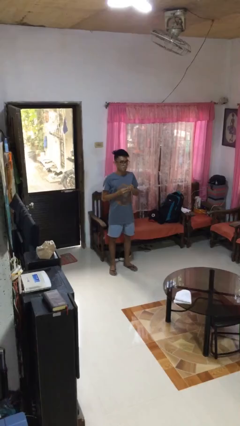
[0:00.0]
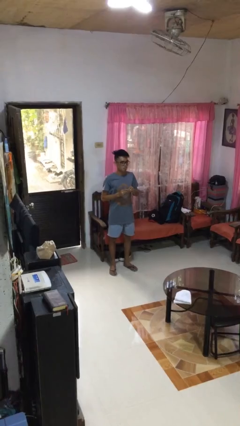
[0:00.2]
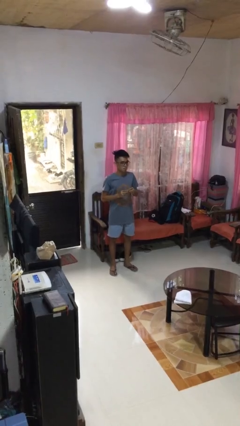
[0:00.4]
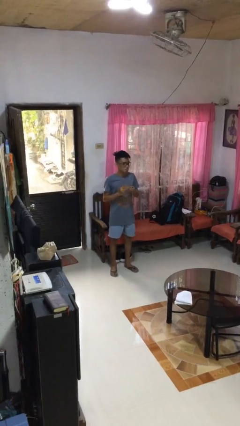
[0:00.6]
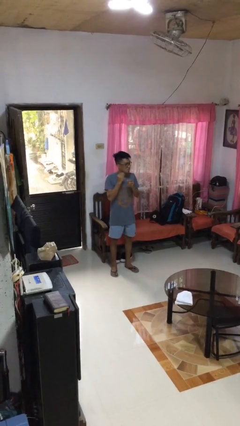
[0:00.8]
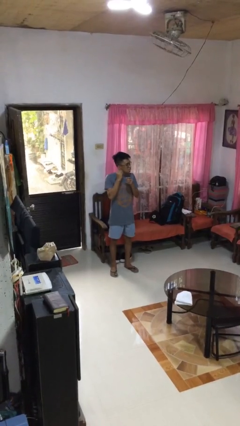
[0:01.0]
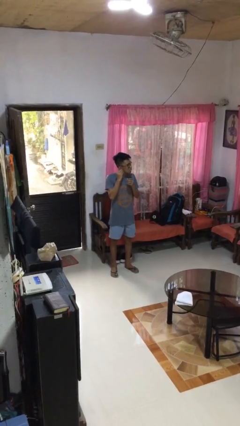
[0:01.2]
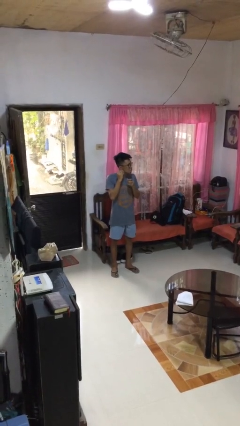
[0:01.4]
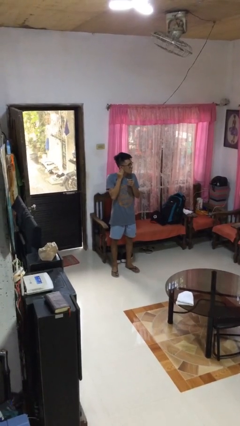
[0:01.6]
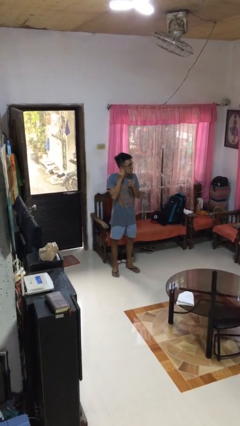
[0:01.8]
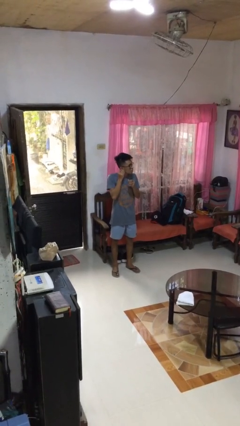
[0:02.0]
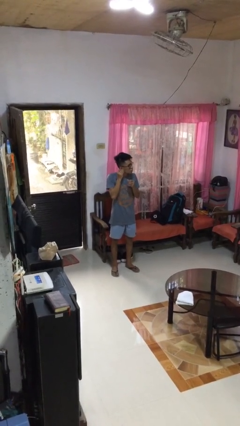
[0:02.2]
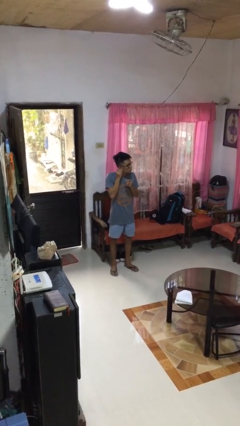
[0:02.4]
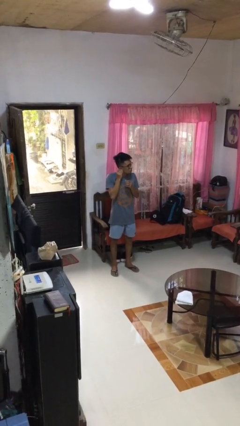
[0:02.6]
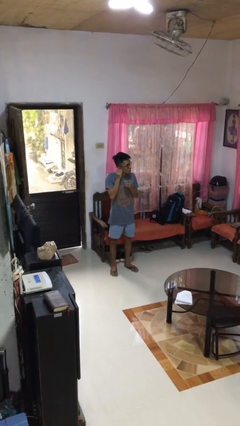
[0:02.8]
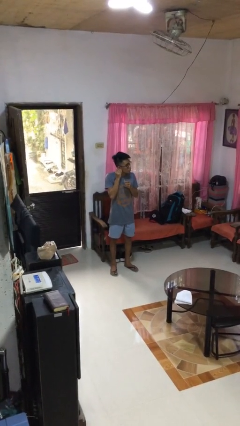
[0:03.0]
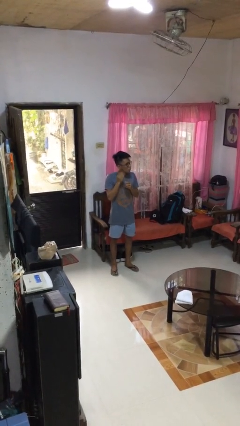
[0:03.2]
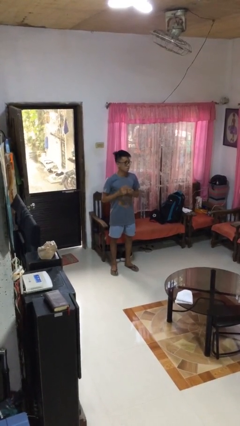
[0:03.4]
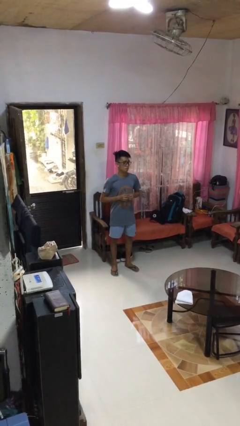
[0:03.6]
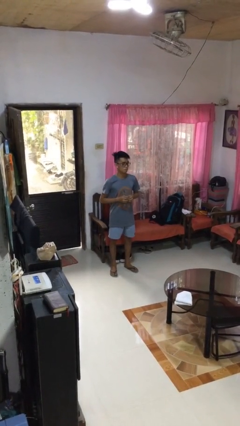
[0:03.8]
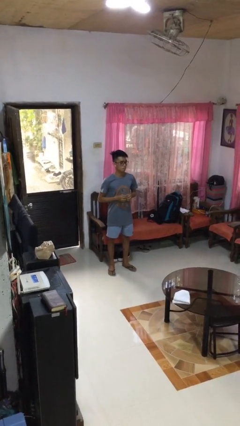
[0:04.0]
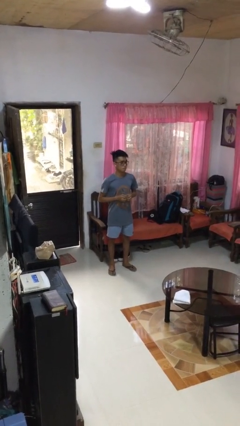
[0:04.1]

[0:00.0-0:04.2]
person puts on earrings

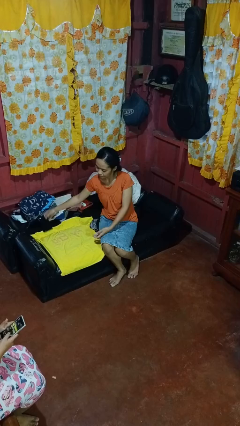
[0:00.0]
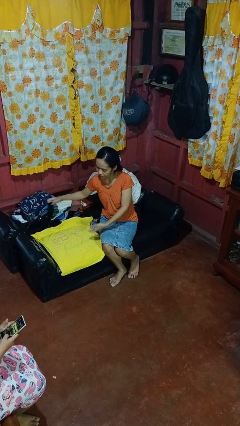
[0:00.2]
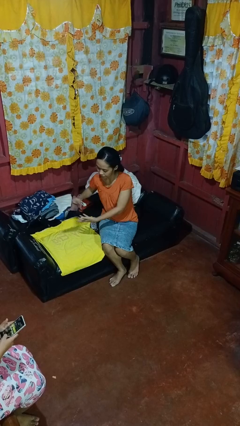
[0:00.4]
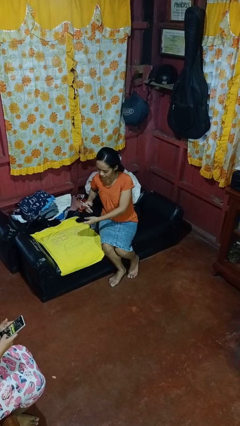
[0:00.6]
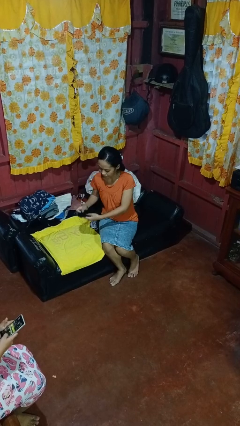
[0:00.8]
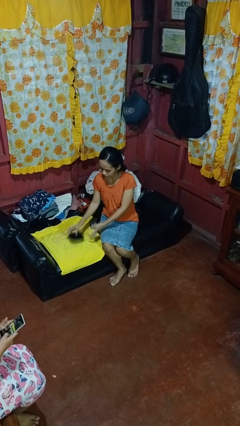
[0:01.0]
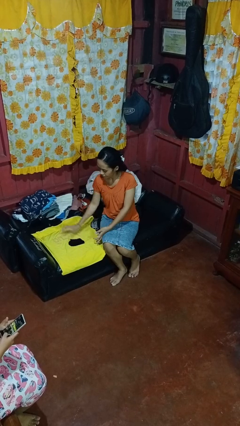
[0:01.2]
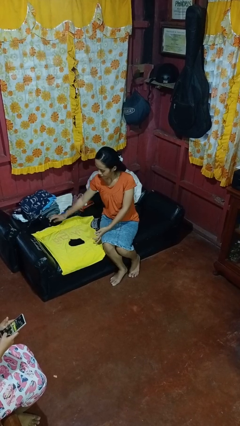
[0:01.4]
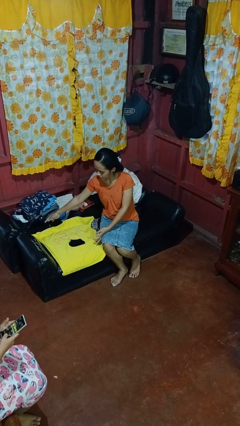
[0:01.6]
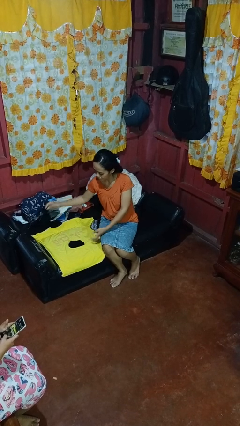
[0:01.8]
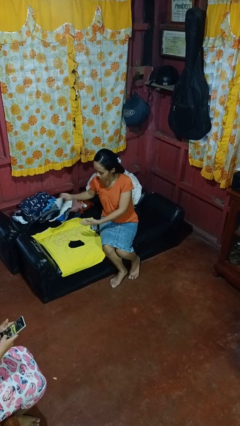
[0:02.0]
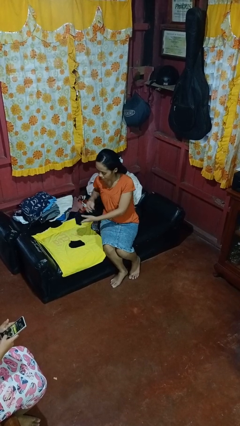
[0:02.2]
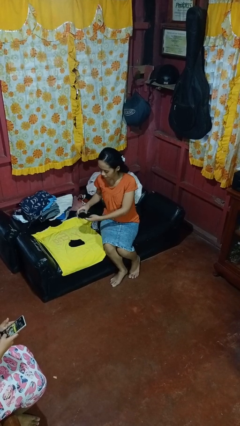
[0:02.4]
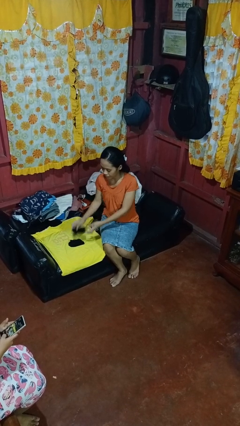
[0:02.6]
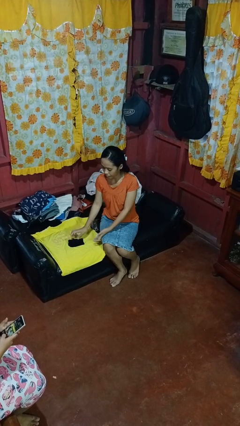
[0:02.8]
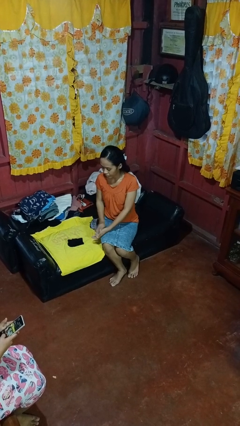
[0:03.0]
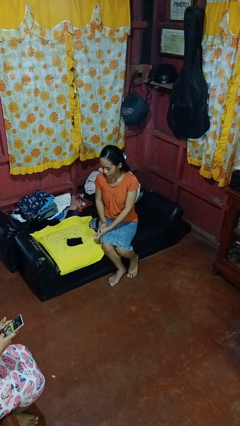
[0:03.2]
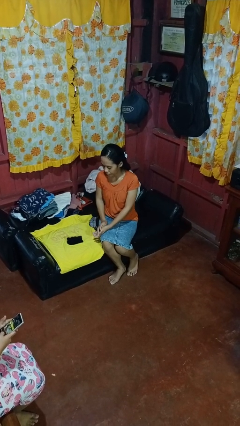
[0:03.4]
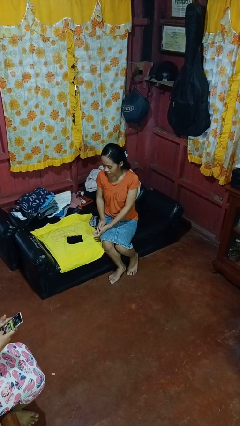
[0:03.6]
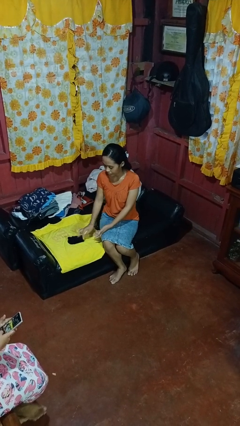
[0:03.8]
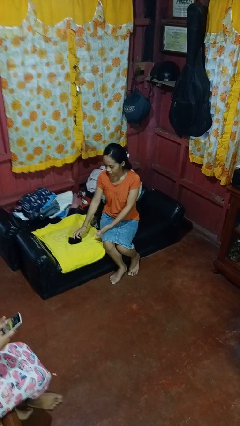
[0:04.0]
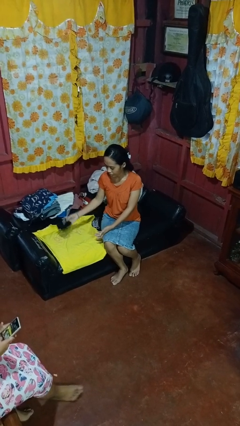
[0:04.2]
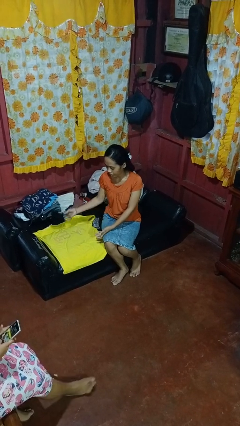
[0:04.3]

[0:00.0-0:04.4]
person folds socks

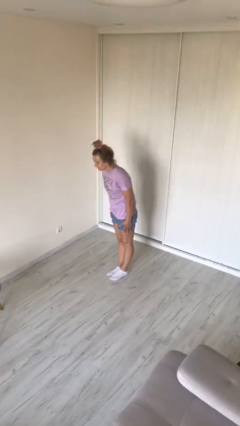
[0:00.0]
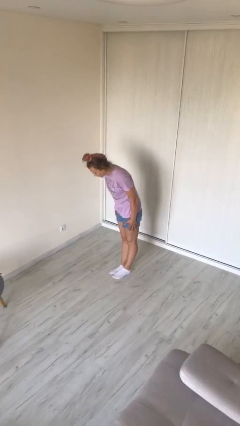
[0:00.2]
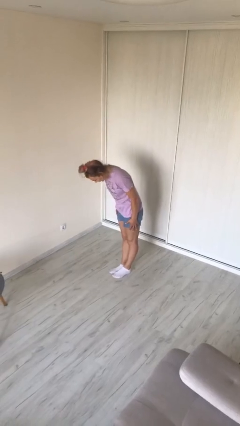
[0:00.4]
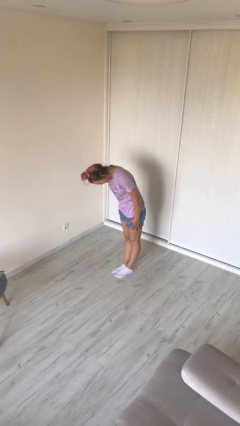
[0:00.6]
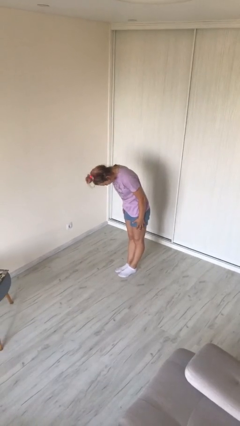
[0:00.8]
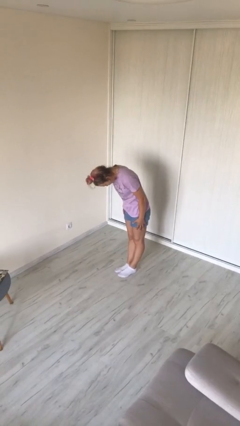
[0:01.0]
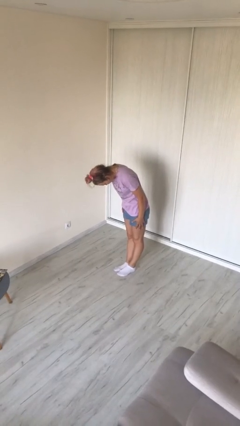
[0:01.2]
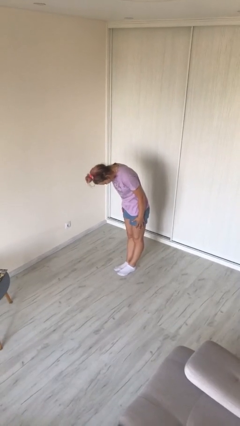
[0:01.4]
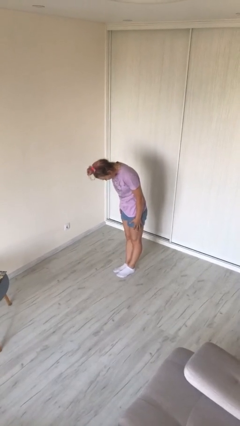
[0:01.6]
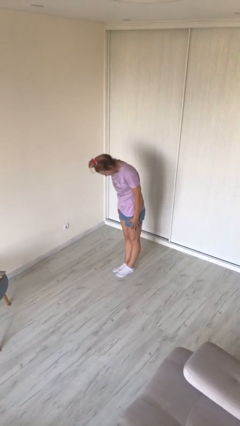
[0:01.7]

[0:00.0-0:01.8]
person bows

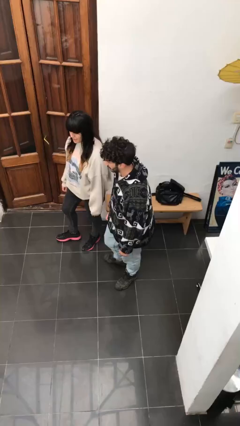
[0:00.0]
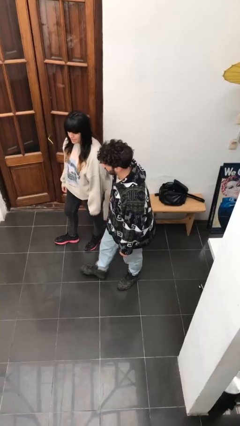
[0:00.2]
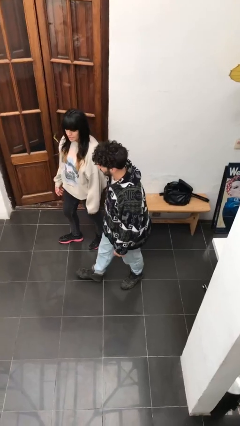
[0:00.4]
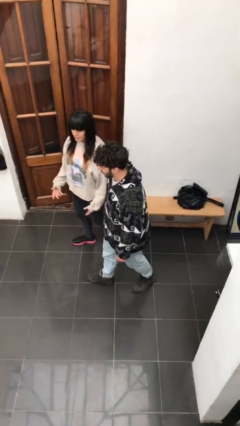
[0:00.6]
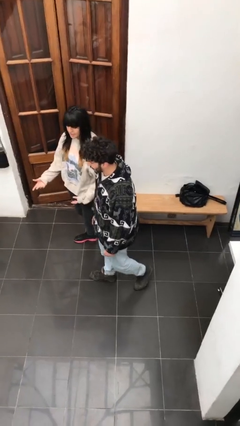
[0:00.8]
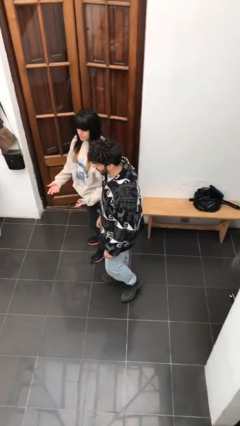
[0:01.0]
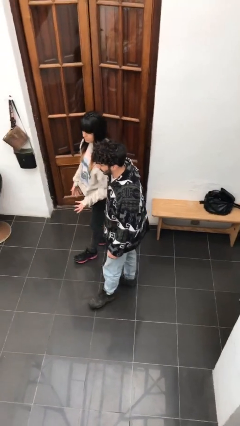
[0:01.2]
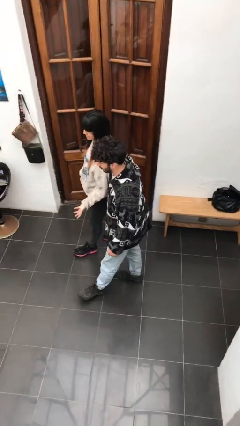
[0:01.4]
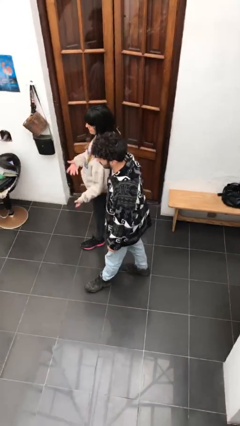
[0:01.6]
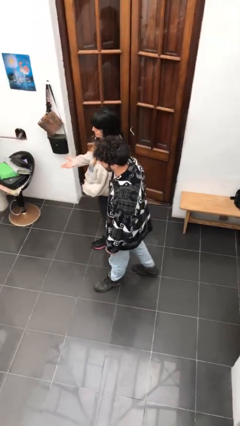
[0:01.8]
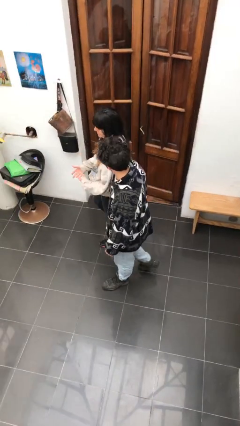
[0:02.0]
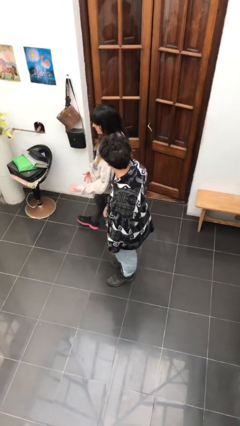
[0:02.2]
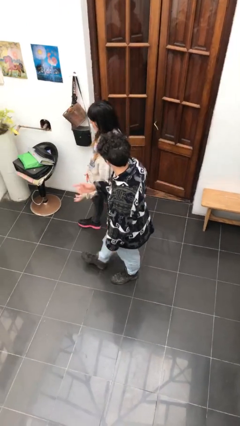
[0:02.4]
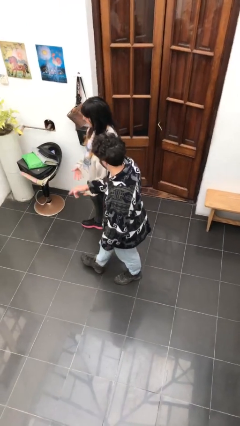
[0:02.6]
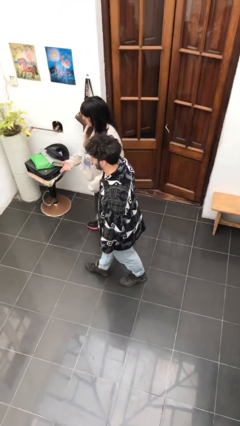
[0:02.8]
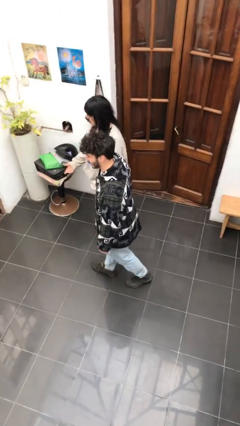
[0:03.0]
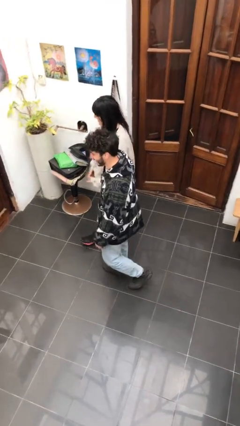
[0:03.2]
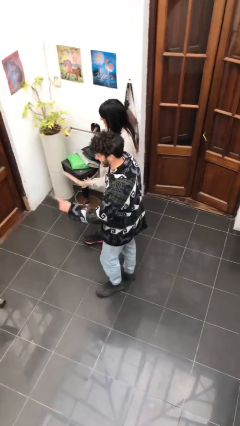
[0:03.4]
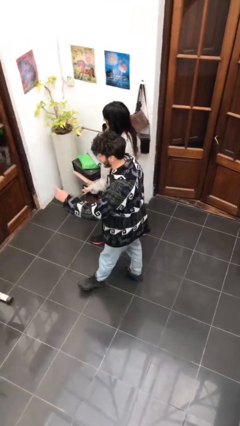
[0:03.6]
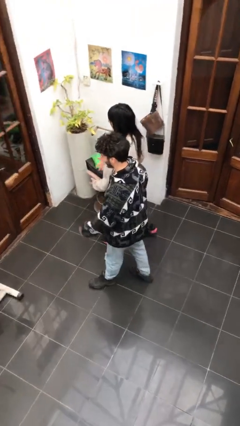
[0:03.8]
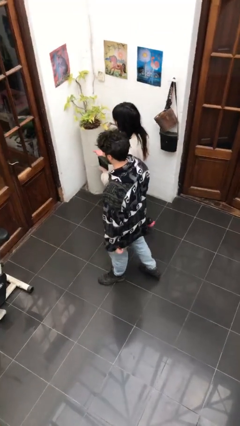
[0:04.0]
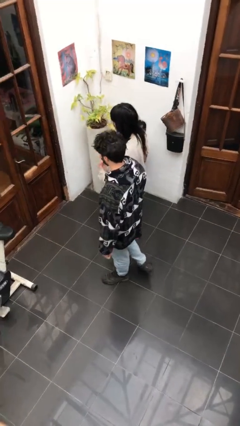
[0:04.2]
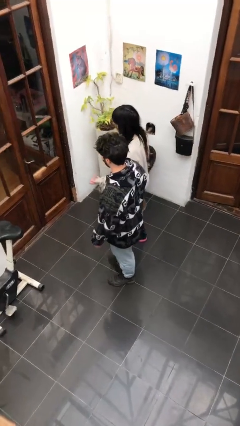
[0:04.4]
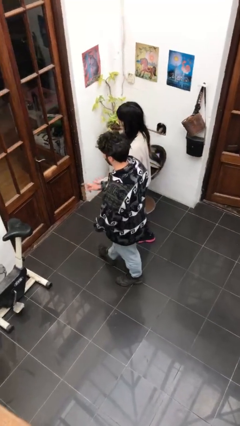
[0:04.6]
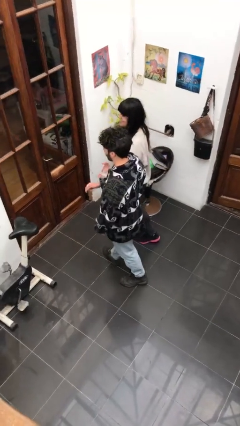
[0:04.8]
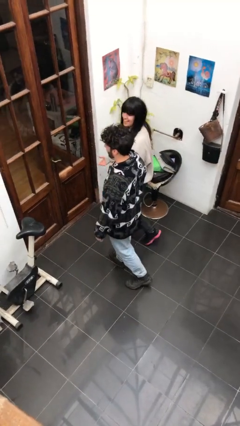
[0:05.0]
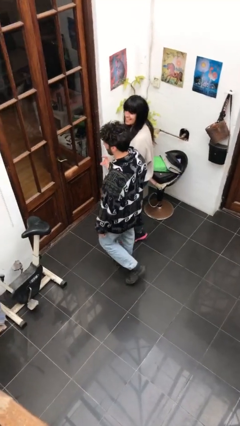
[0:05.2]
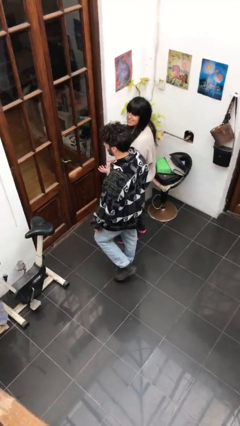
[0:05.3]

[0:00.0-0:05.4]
person talks to person

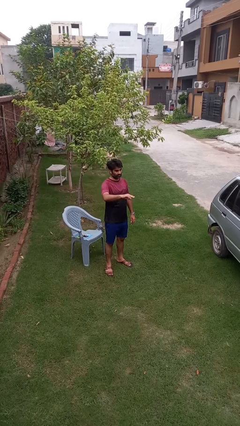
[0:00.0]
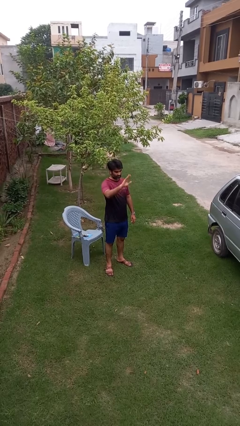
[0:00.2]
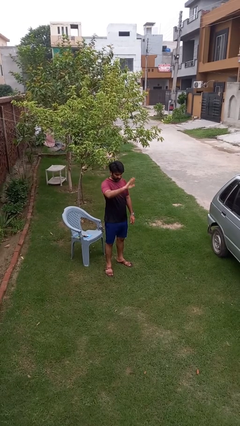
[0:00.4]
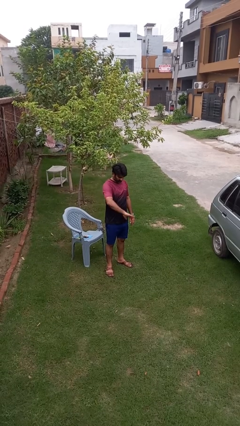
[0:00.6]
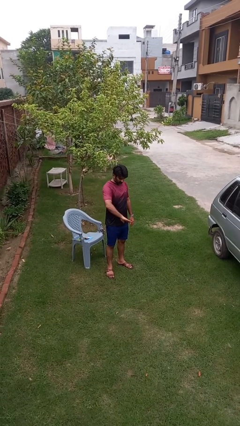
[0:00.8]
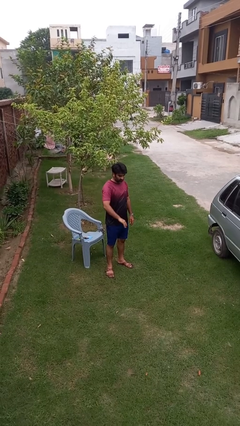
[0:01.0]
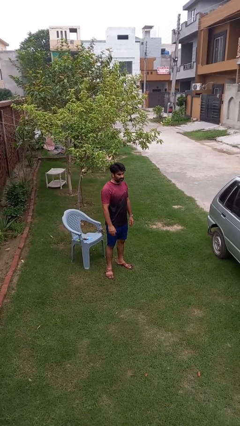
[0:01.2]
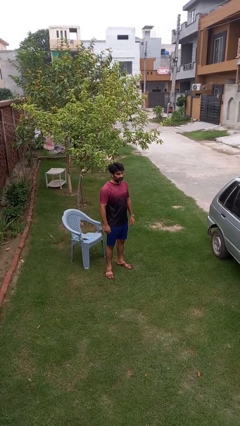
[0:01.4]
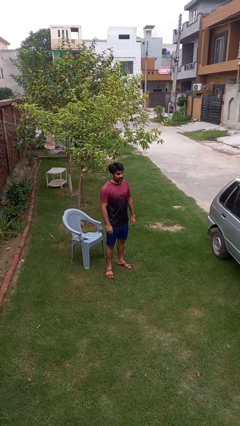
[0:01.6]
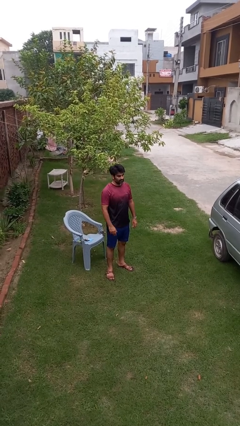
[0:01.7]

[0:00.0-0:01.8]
person gestures swipe down
